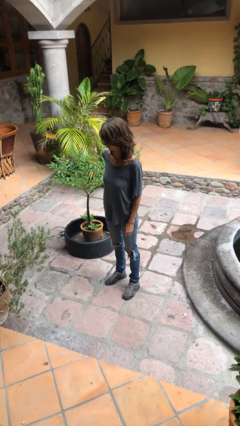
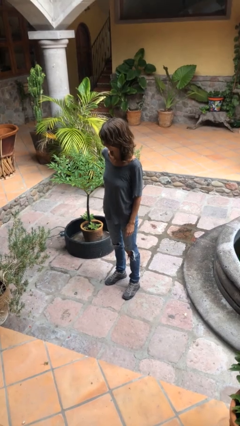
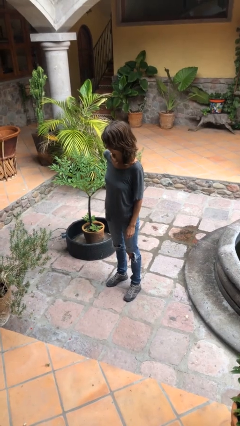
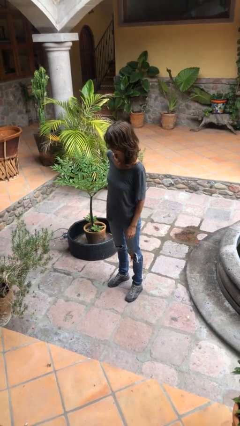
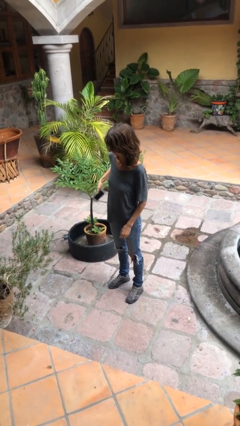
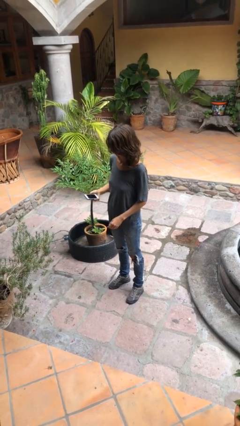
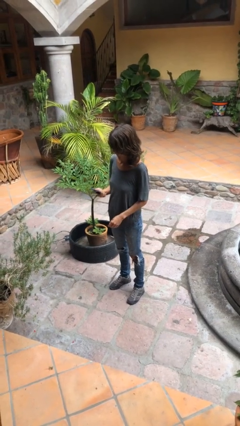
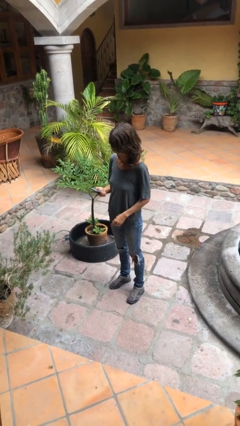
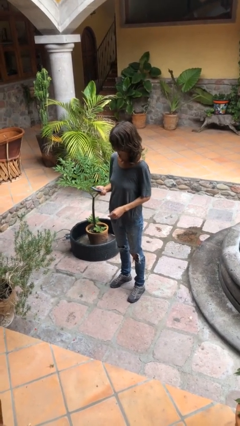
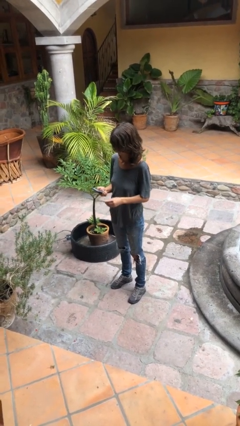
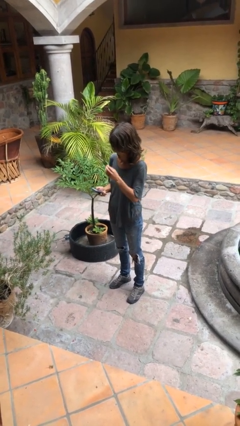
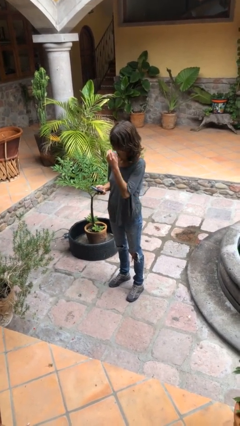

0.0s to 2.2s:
person takes phone from pocket

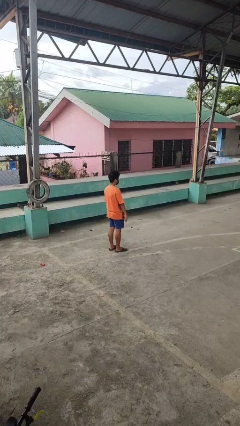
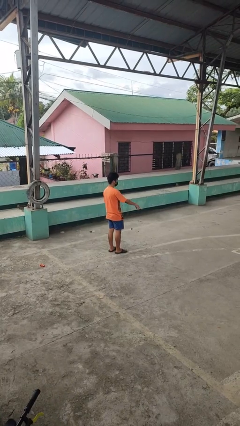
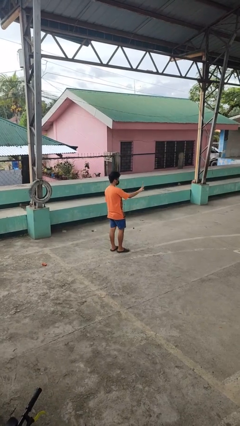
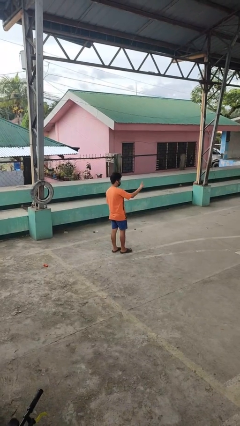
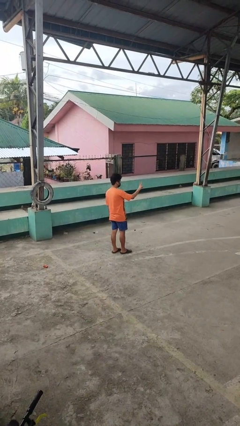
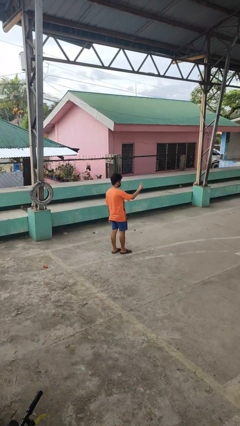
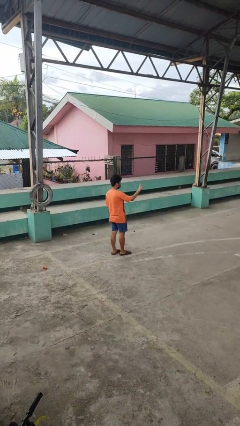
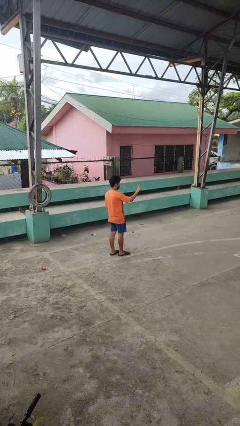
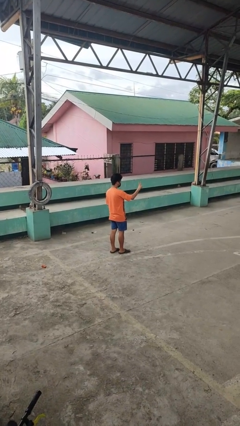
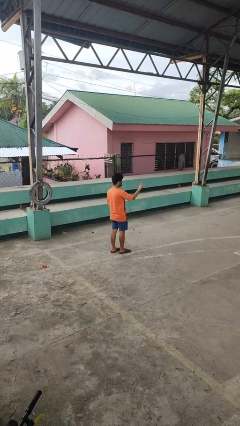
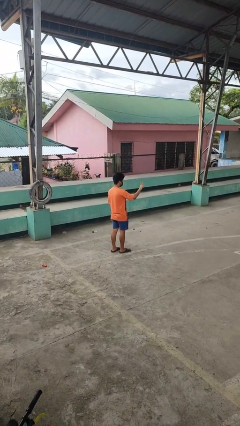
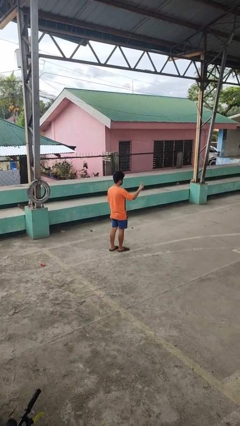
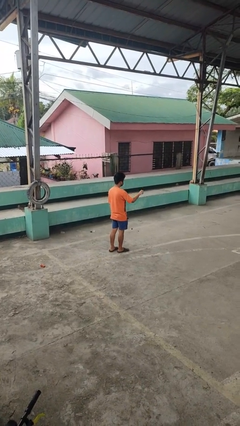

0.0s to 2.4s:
person gestures peace

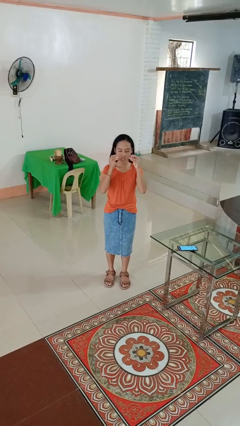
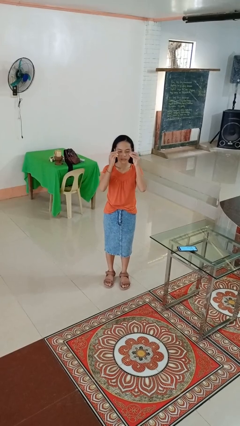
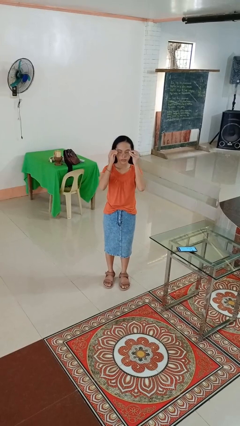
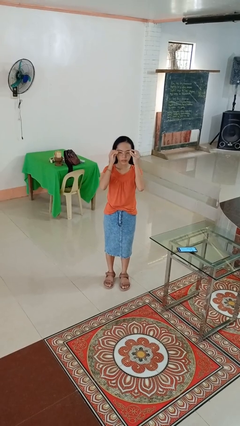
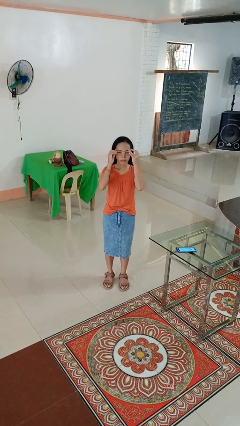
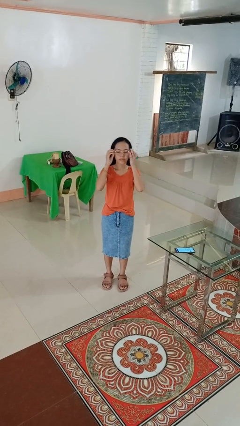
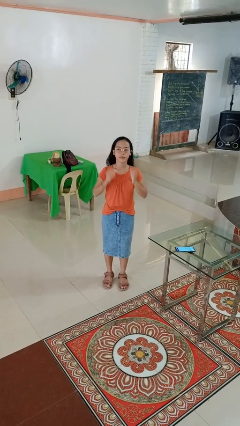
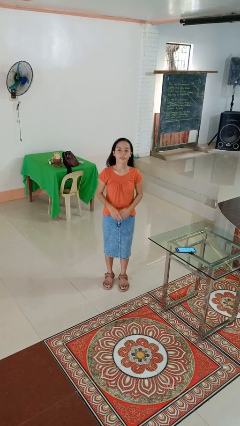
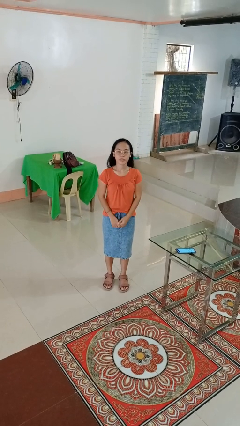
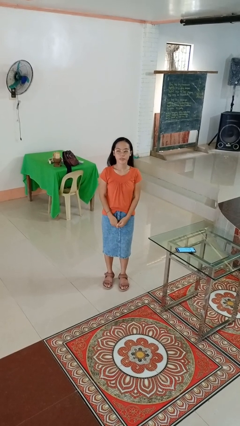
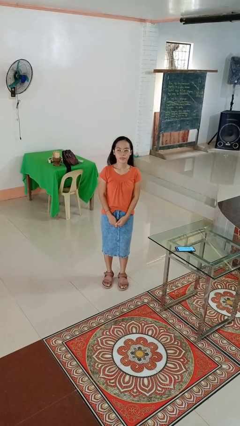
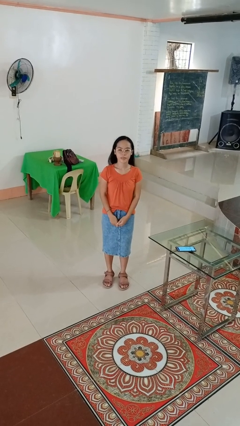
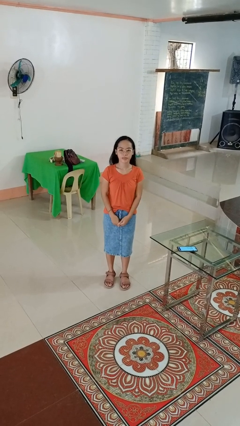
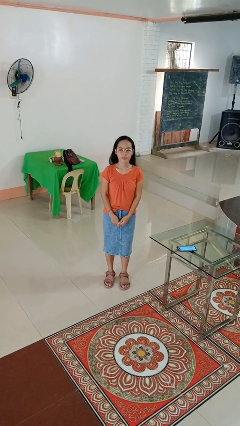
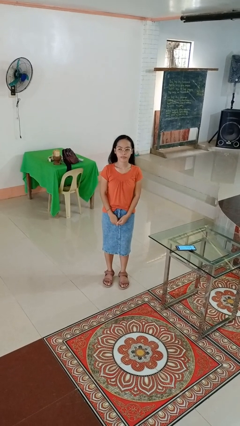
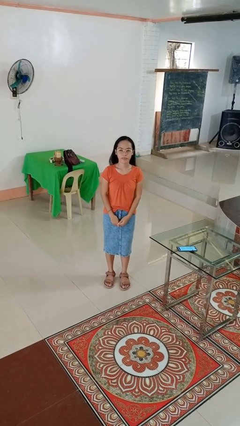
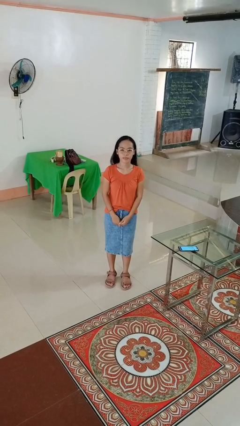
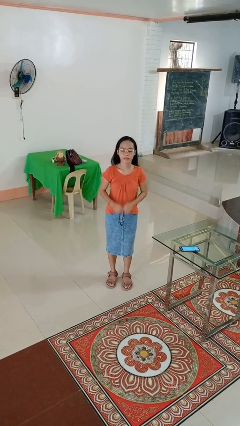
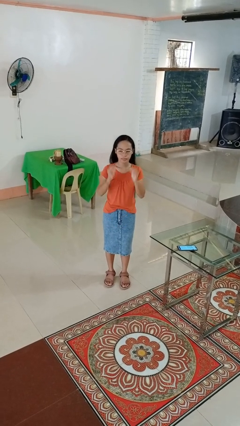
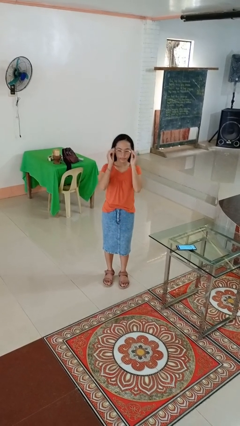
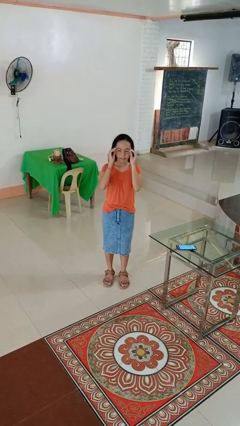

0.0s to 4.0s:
person puts on glasses

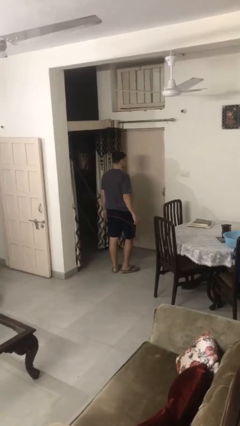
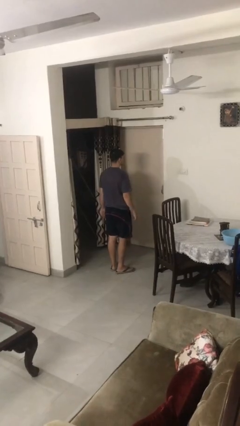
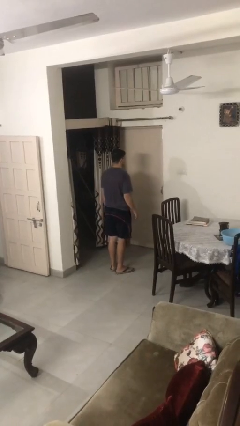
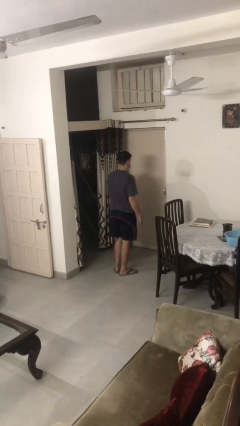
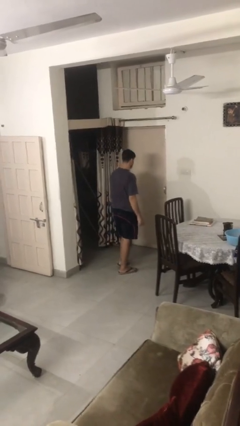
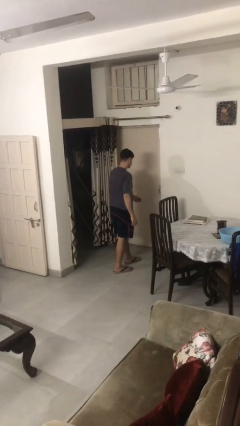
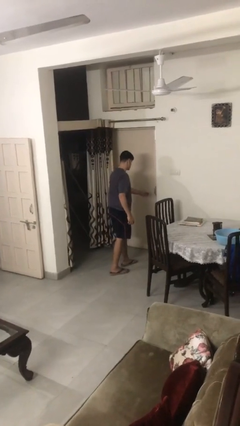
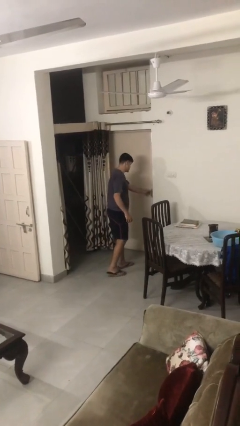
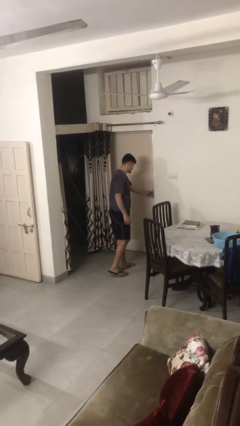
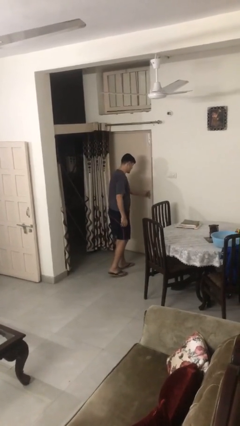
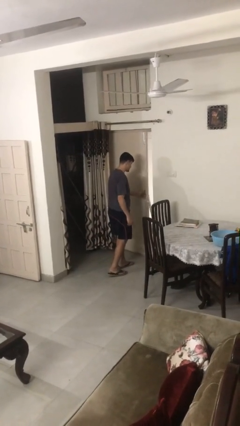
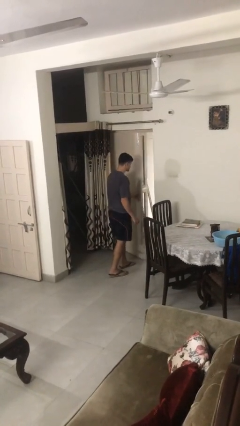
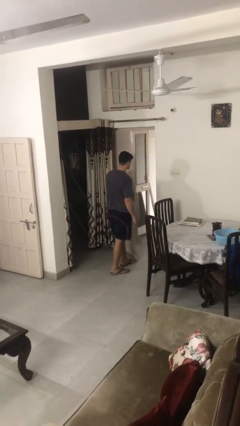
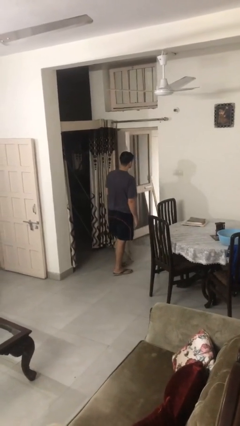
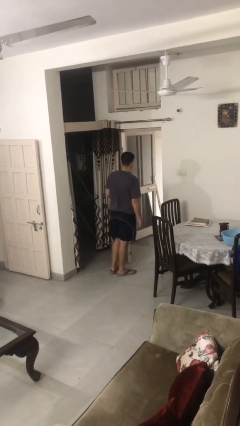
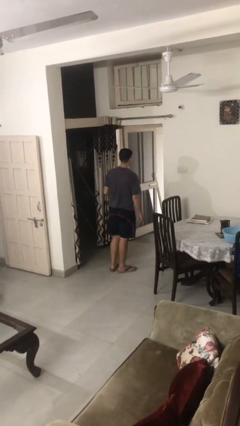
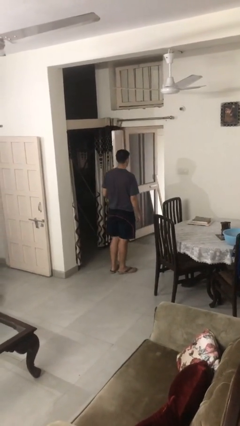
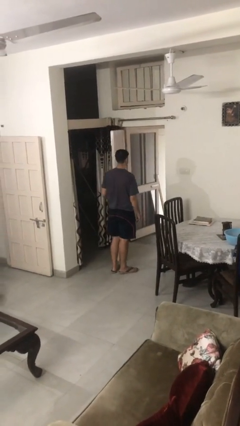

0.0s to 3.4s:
person opens facility door

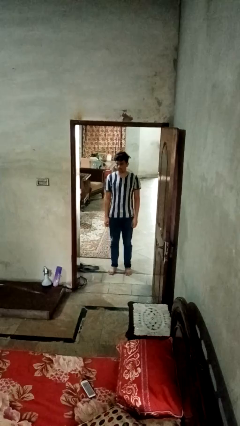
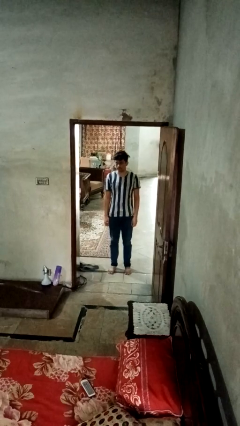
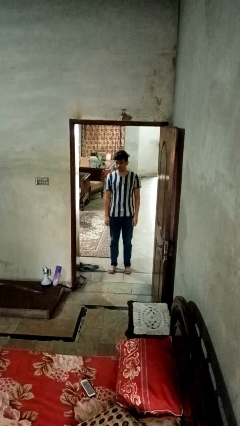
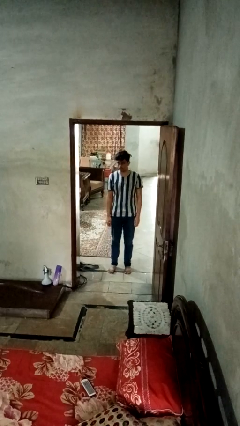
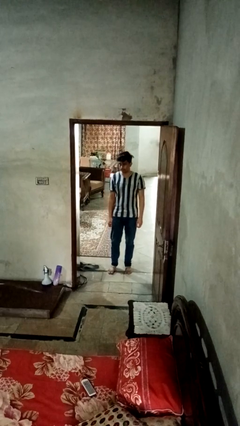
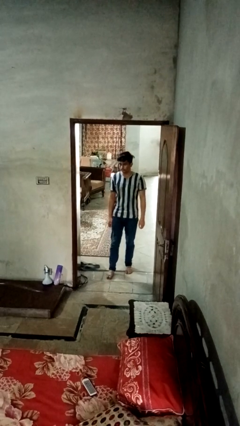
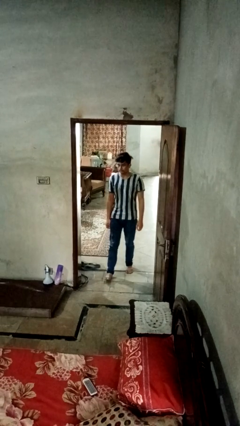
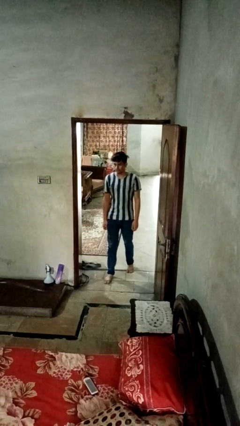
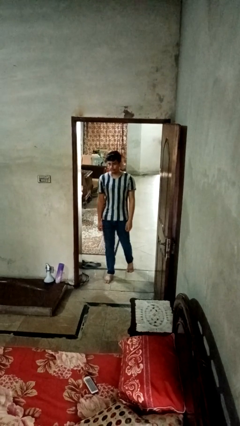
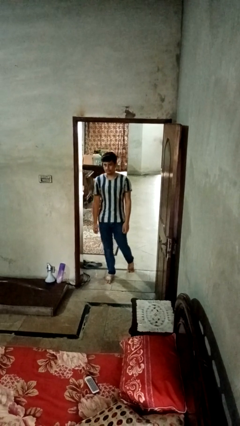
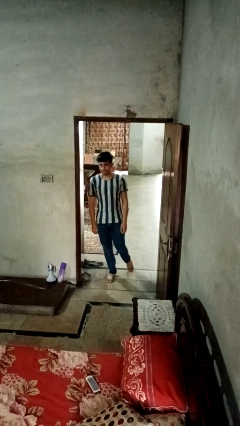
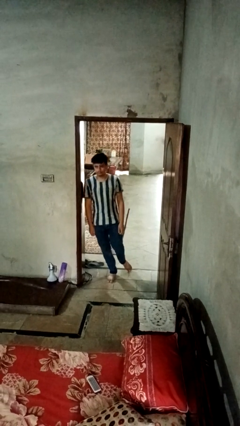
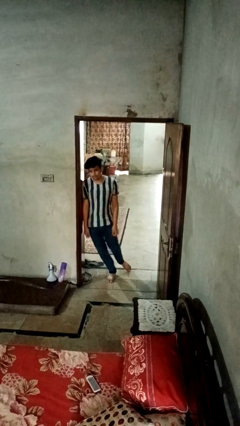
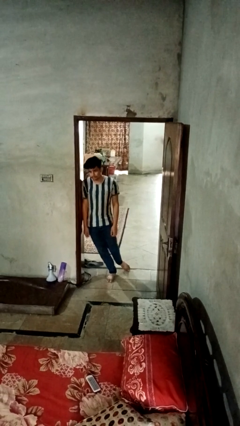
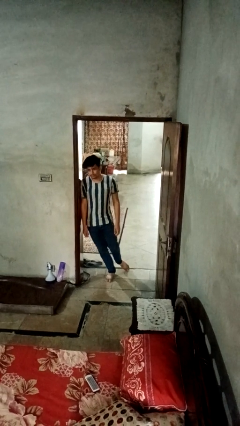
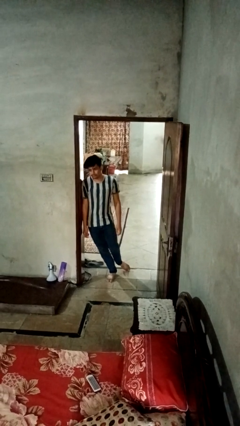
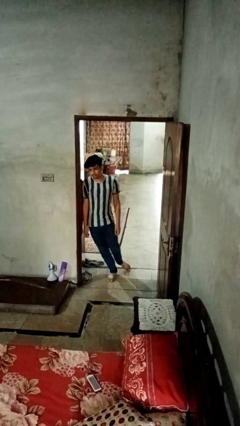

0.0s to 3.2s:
person bumps into wall

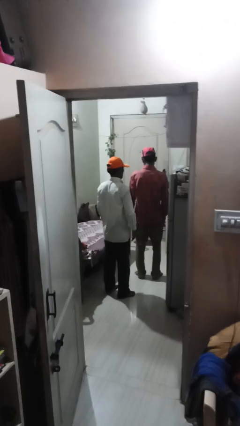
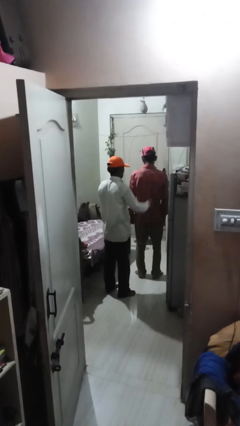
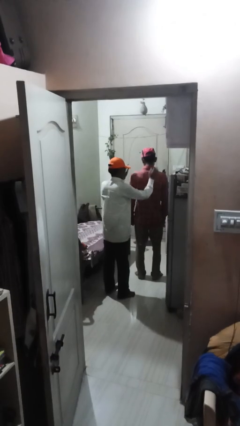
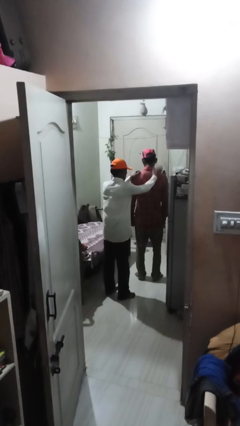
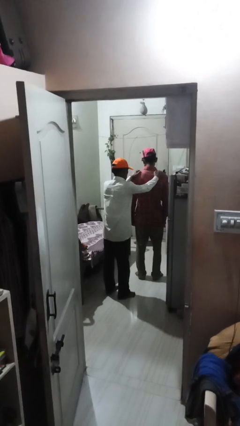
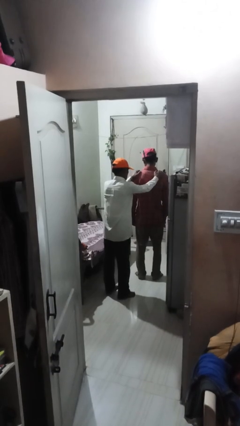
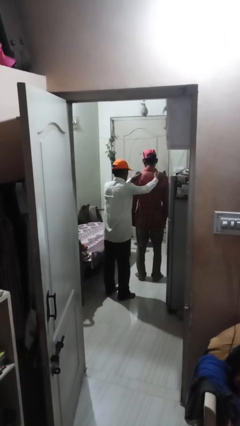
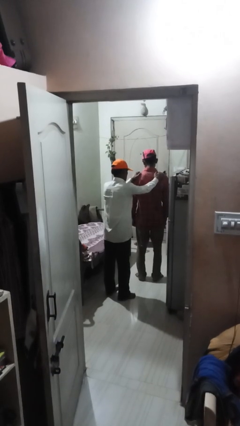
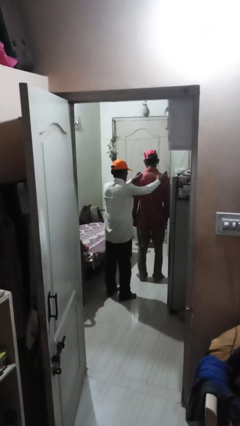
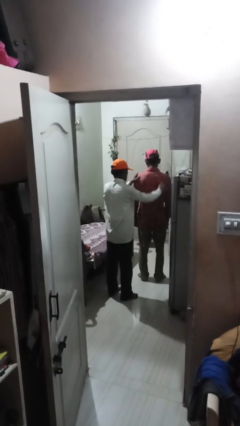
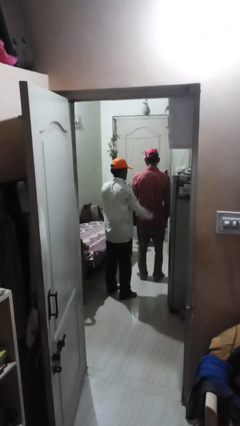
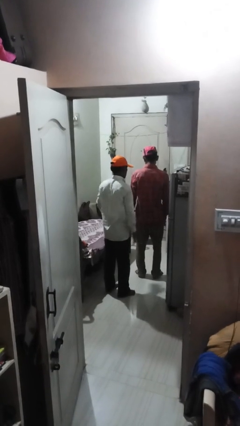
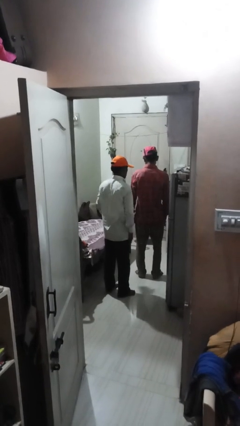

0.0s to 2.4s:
person touches back of person
